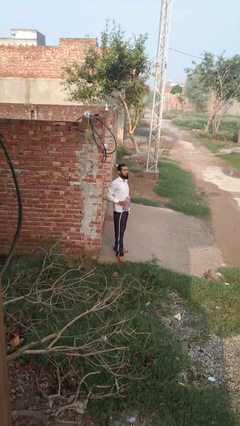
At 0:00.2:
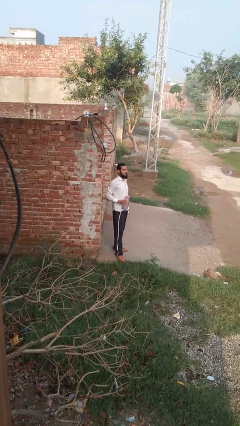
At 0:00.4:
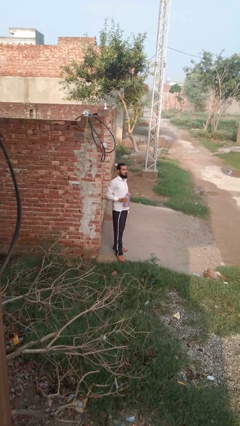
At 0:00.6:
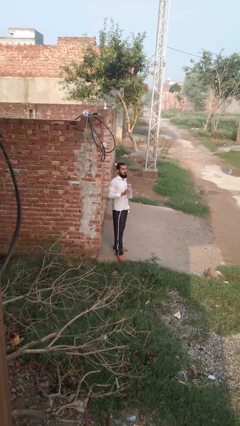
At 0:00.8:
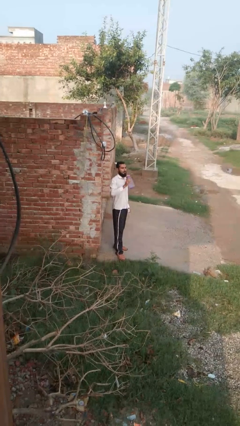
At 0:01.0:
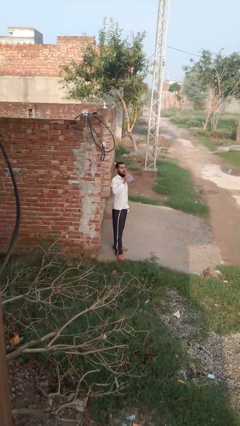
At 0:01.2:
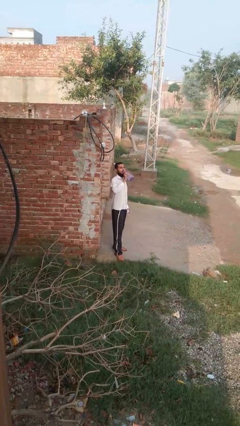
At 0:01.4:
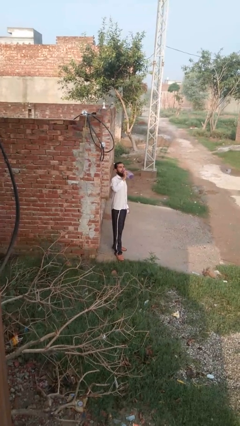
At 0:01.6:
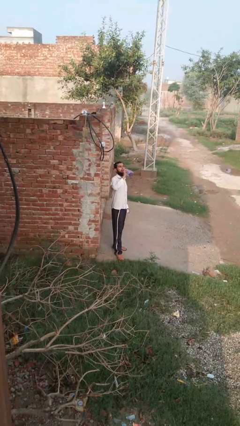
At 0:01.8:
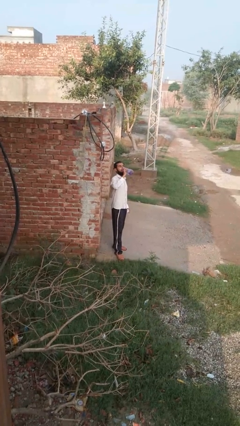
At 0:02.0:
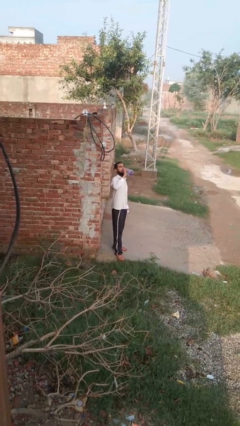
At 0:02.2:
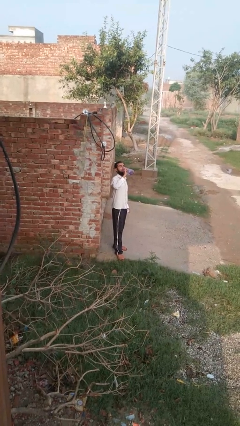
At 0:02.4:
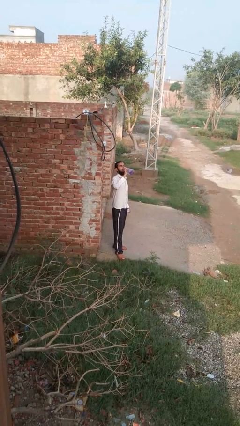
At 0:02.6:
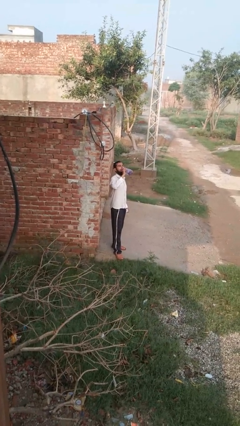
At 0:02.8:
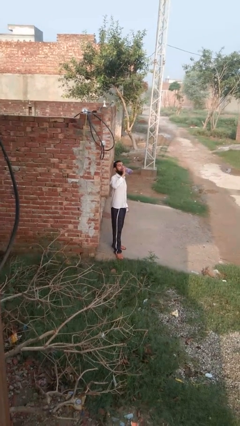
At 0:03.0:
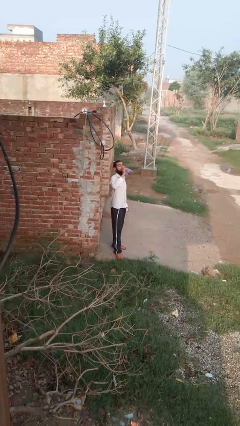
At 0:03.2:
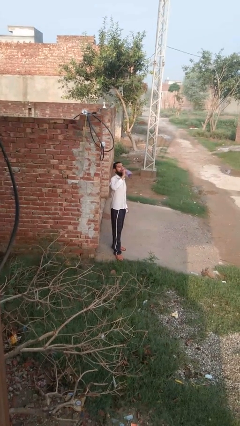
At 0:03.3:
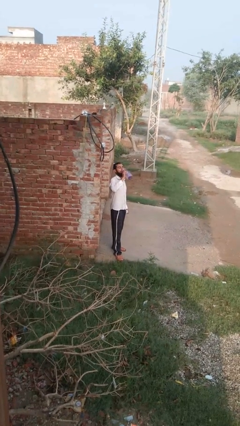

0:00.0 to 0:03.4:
person drinks from bottle

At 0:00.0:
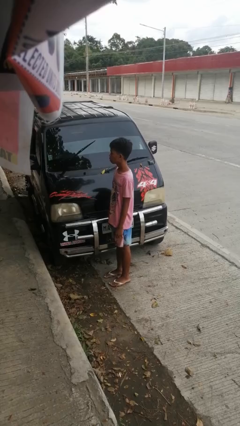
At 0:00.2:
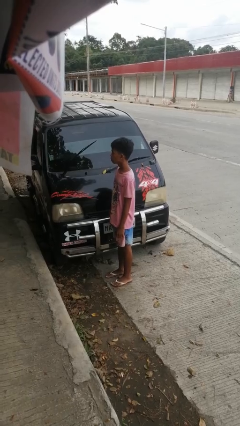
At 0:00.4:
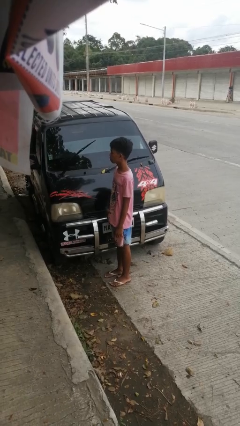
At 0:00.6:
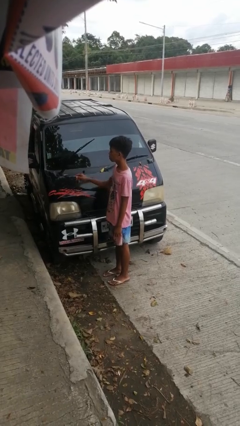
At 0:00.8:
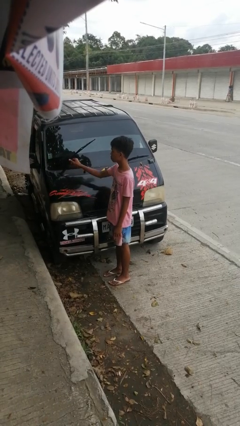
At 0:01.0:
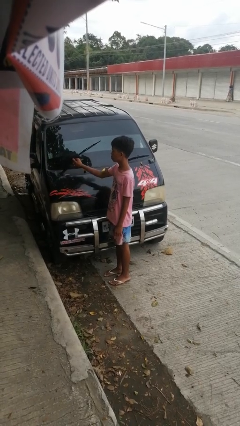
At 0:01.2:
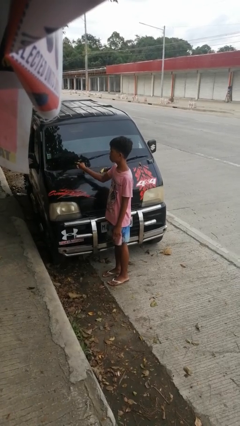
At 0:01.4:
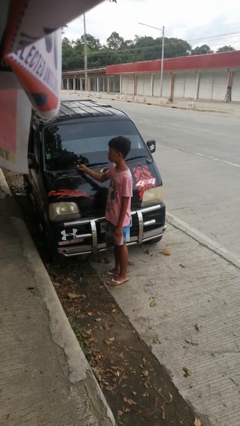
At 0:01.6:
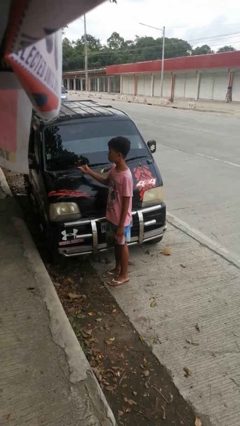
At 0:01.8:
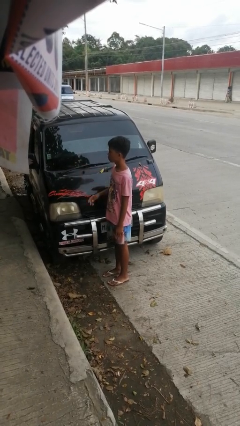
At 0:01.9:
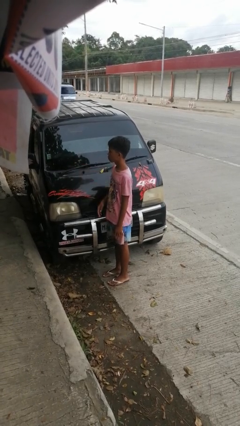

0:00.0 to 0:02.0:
person flips down car wipers

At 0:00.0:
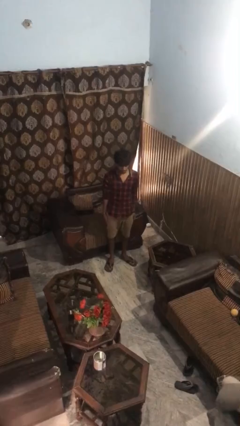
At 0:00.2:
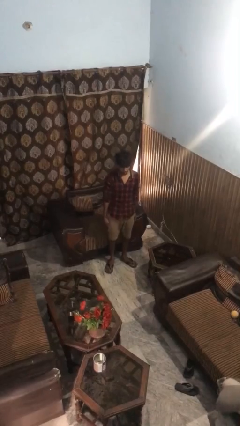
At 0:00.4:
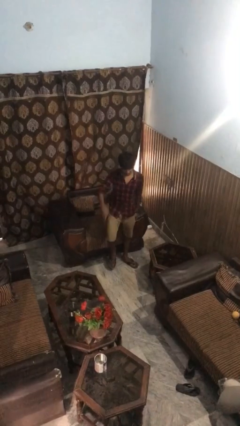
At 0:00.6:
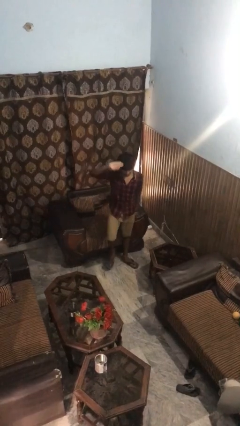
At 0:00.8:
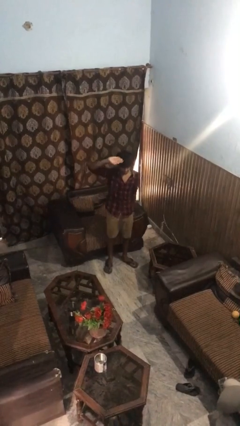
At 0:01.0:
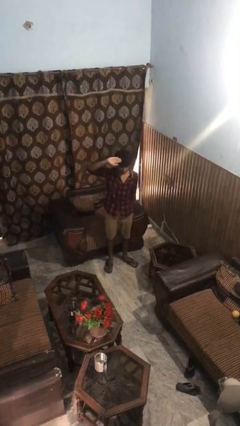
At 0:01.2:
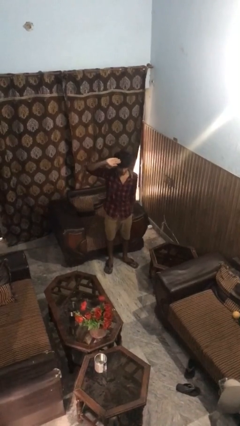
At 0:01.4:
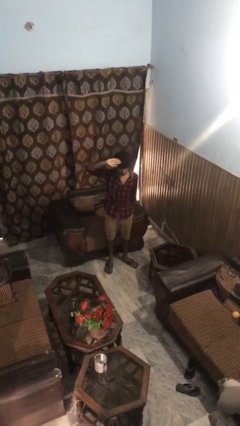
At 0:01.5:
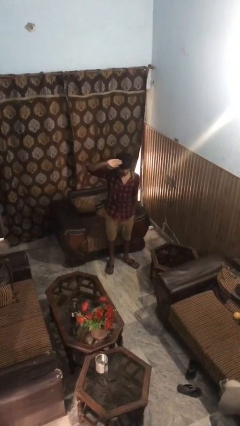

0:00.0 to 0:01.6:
person salutes

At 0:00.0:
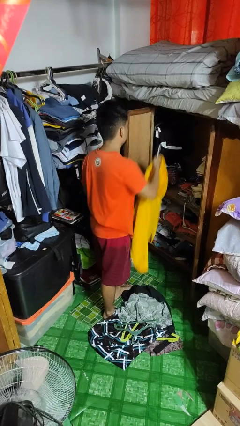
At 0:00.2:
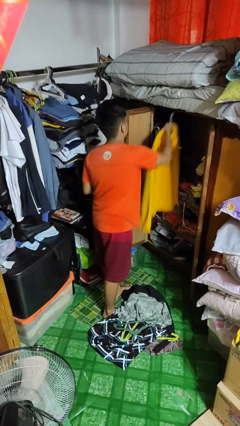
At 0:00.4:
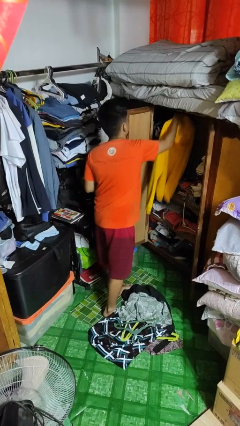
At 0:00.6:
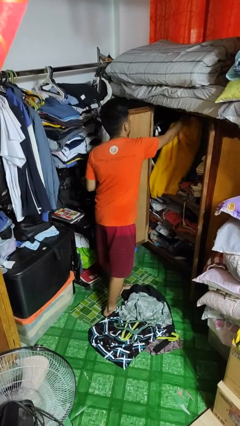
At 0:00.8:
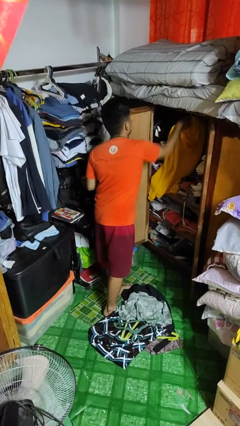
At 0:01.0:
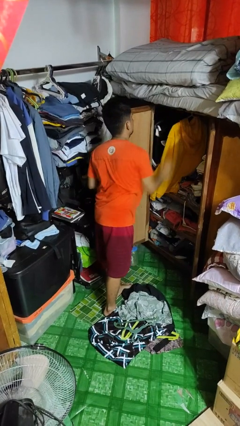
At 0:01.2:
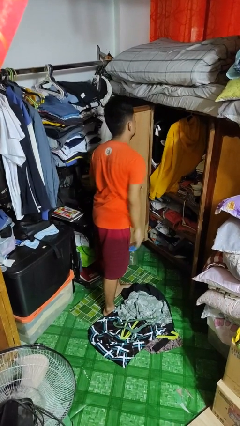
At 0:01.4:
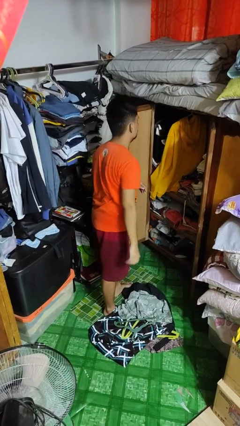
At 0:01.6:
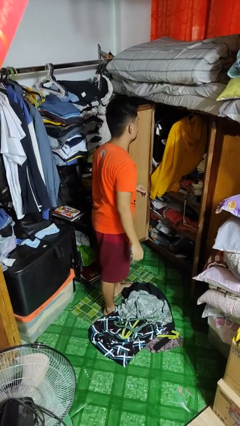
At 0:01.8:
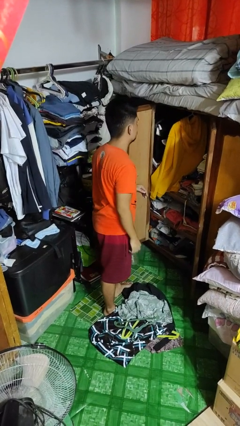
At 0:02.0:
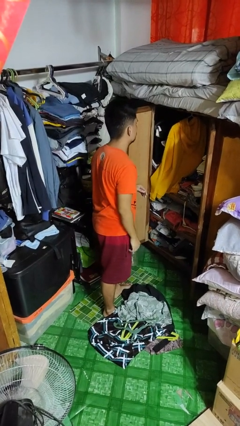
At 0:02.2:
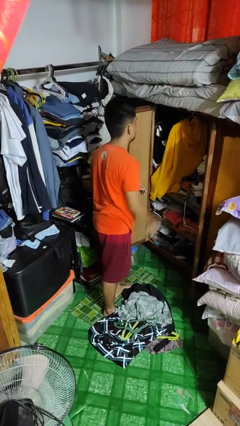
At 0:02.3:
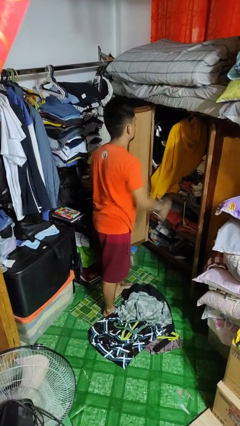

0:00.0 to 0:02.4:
person puts clothes into closet

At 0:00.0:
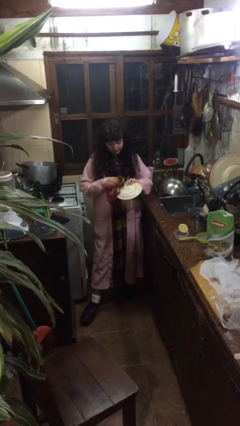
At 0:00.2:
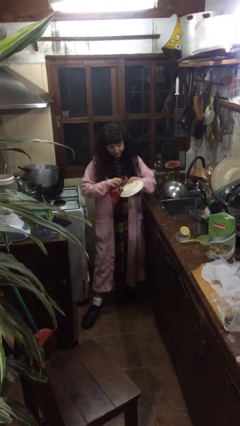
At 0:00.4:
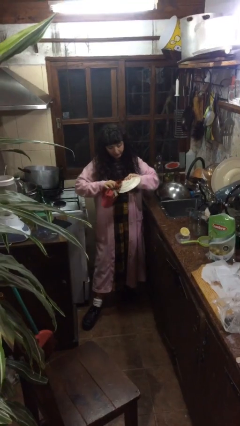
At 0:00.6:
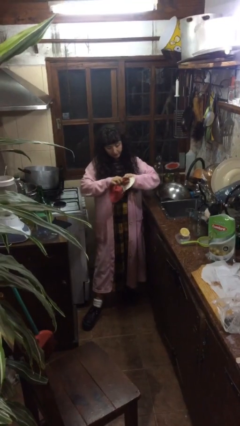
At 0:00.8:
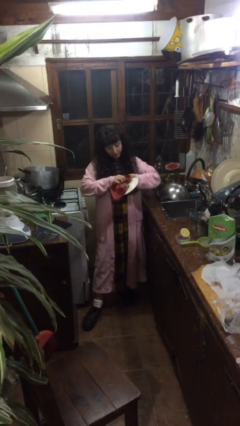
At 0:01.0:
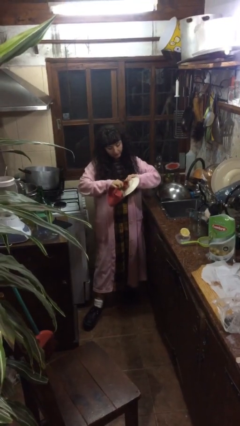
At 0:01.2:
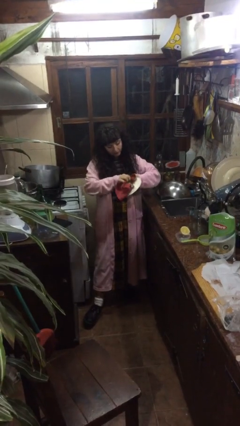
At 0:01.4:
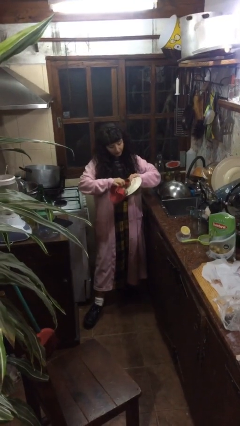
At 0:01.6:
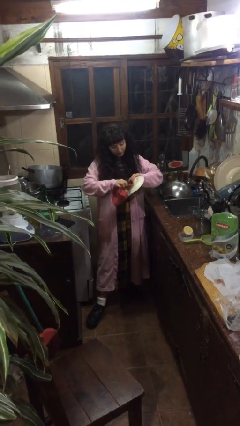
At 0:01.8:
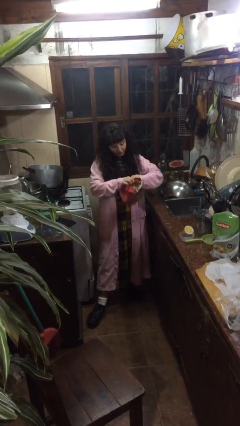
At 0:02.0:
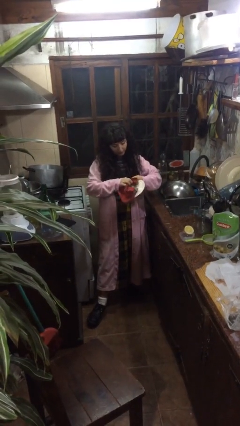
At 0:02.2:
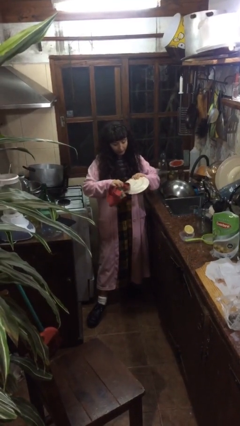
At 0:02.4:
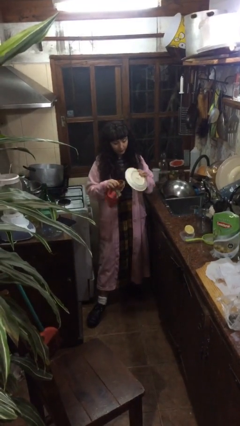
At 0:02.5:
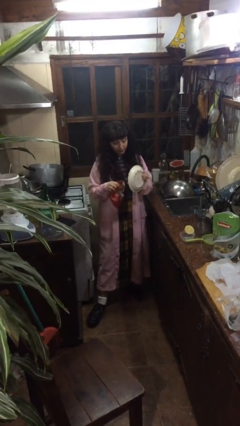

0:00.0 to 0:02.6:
person dries dish

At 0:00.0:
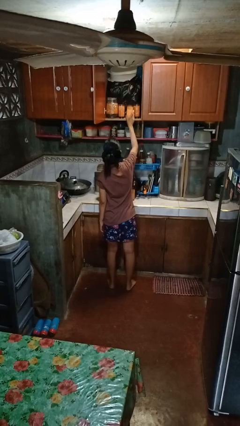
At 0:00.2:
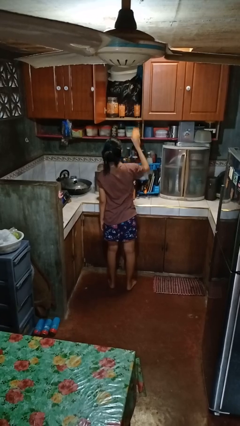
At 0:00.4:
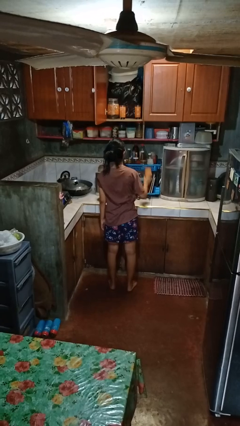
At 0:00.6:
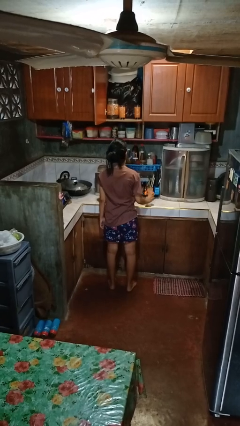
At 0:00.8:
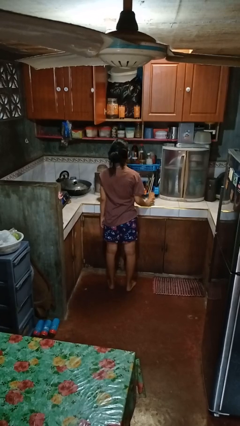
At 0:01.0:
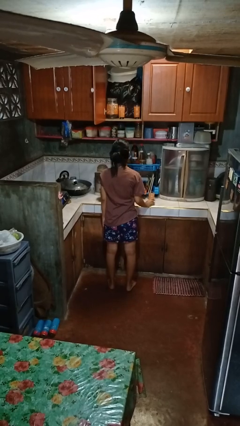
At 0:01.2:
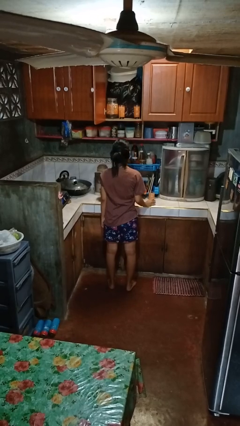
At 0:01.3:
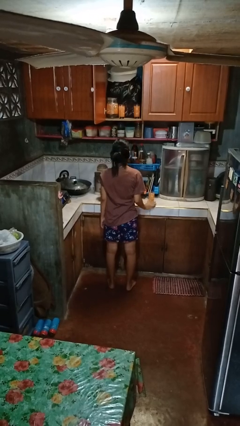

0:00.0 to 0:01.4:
person takes object from cabinet

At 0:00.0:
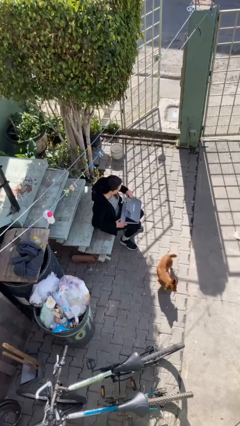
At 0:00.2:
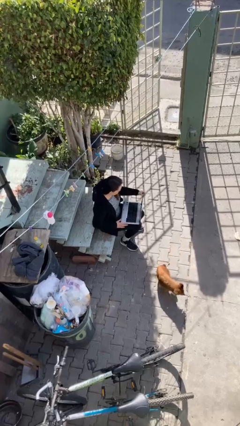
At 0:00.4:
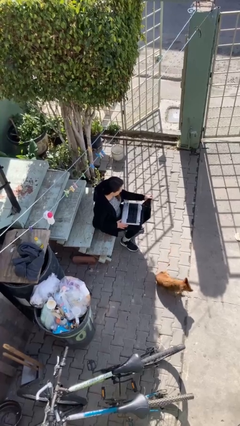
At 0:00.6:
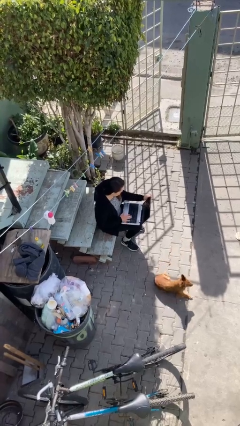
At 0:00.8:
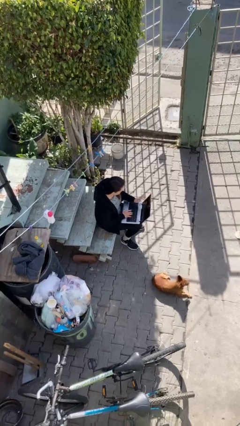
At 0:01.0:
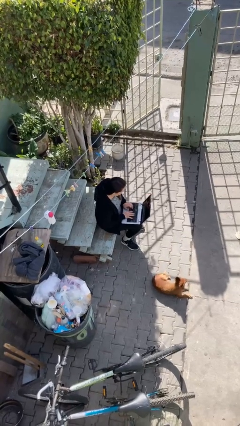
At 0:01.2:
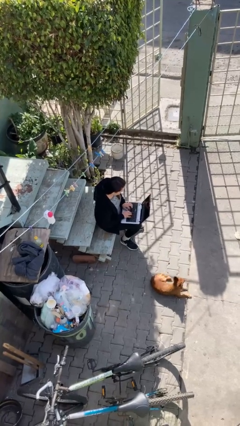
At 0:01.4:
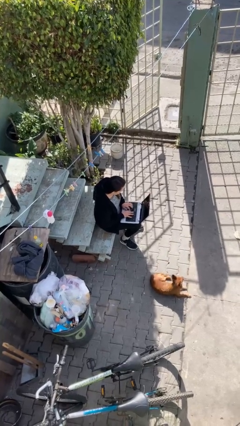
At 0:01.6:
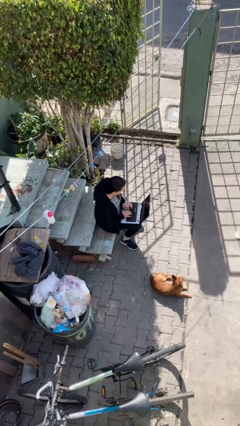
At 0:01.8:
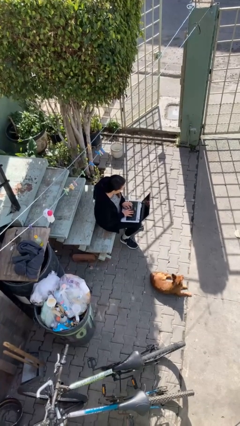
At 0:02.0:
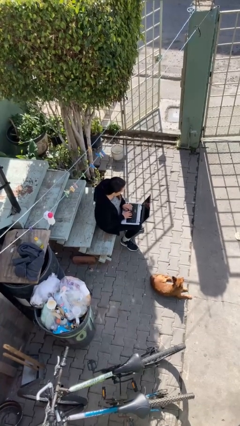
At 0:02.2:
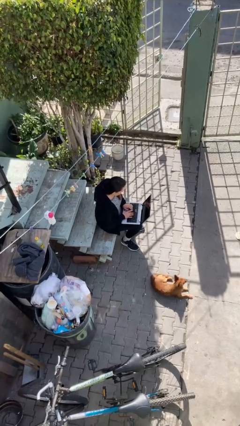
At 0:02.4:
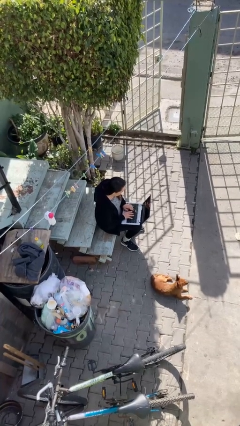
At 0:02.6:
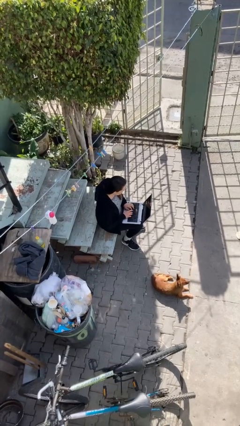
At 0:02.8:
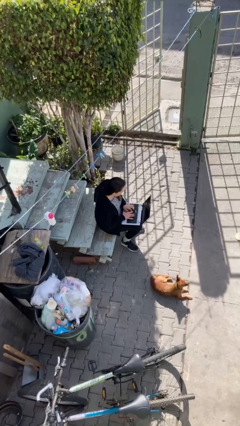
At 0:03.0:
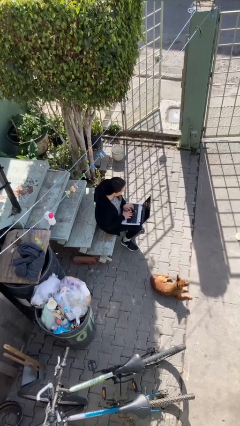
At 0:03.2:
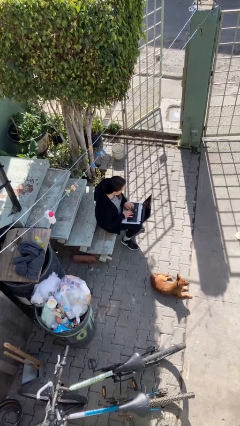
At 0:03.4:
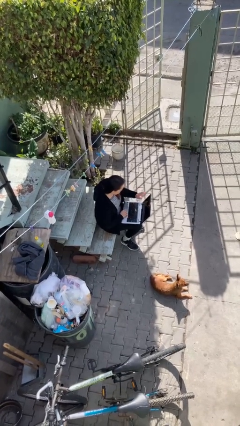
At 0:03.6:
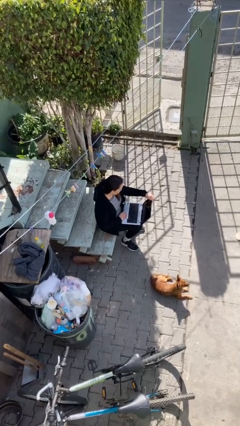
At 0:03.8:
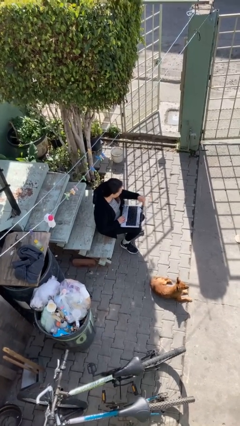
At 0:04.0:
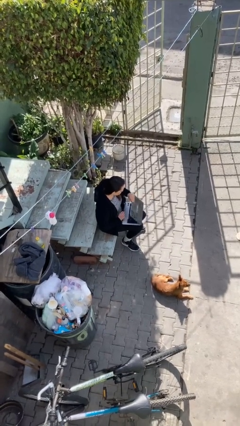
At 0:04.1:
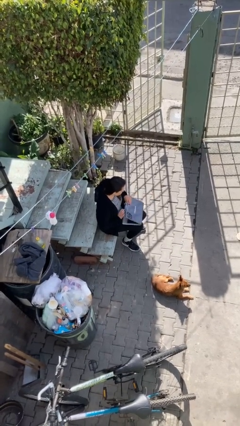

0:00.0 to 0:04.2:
person interacts with laptop
